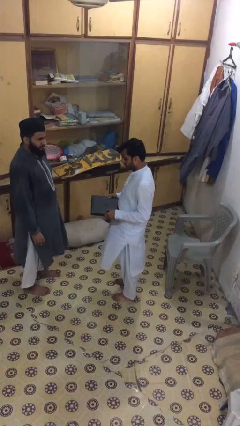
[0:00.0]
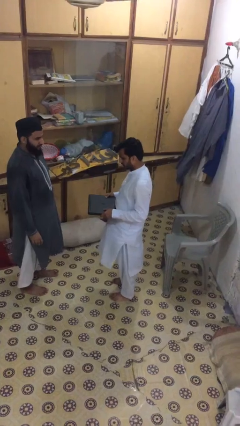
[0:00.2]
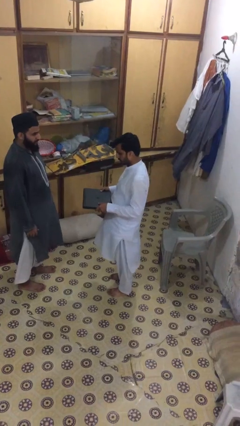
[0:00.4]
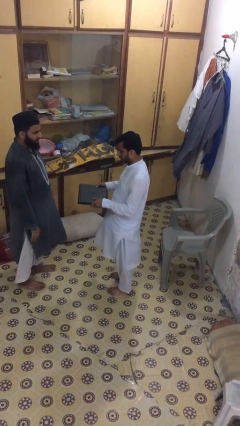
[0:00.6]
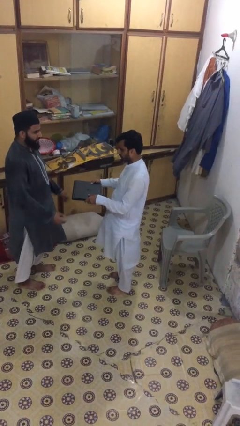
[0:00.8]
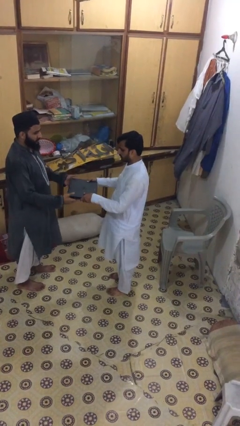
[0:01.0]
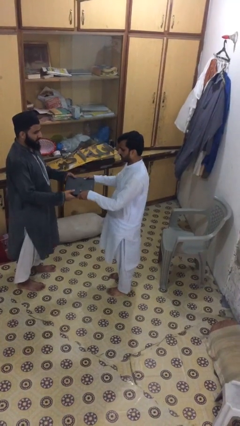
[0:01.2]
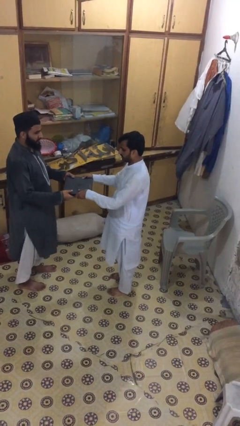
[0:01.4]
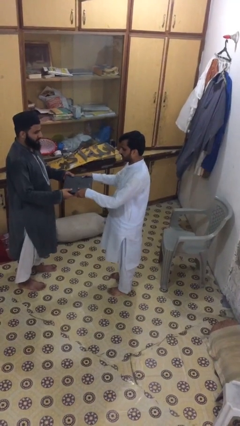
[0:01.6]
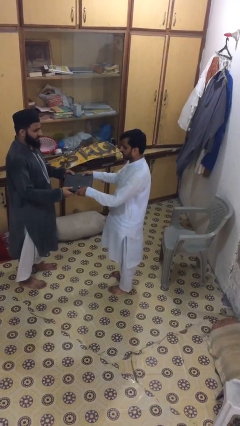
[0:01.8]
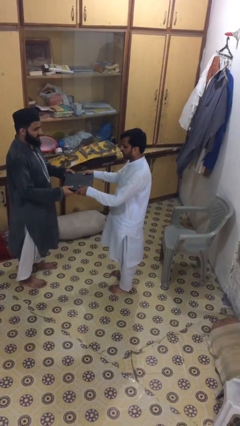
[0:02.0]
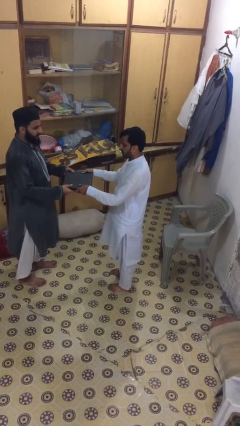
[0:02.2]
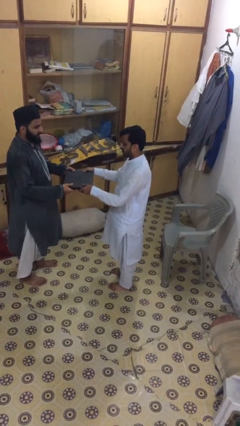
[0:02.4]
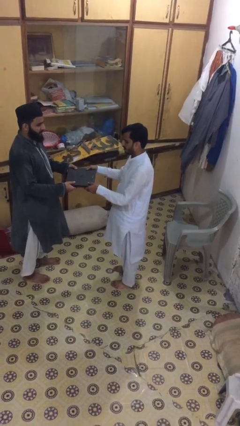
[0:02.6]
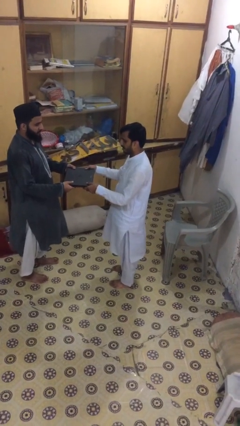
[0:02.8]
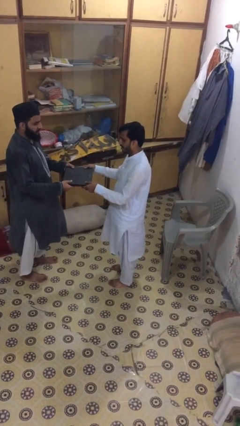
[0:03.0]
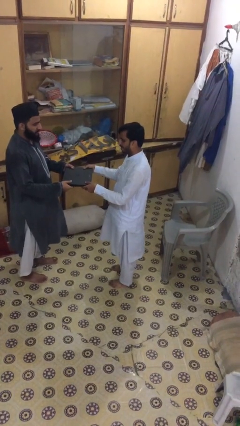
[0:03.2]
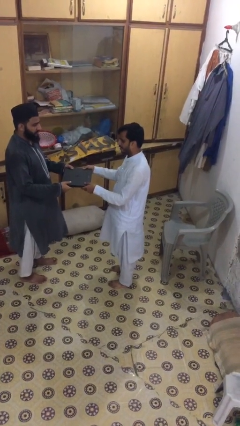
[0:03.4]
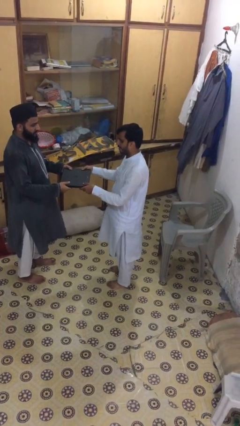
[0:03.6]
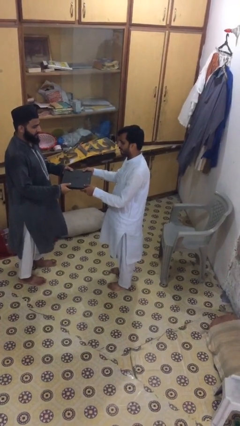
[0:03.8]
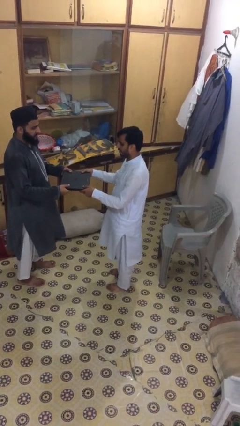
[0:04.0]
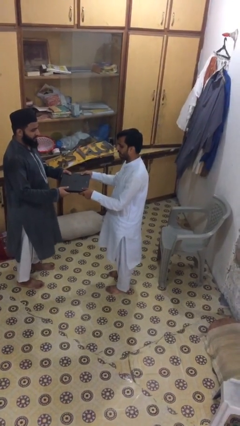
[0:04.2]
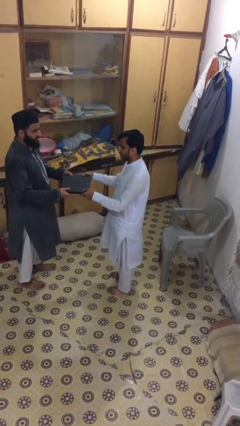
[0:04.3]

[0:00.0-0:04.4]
person transfers object to person

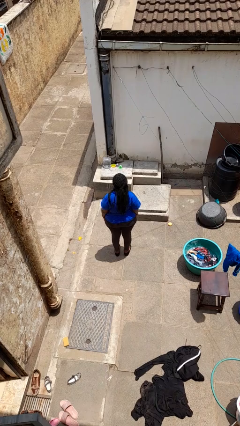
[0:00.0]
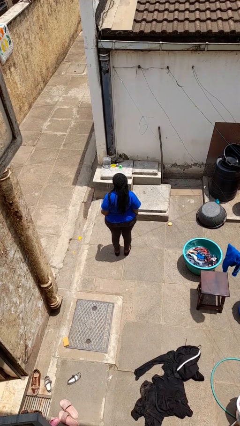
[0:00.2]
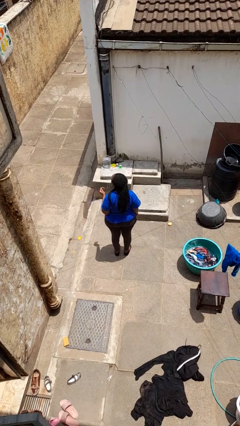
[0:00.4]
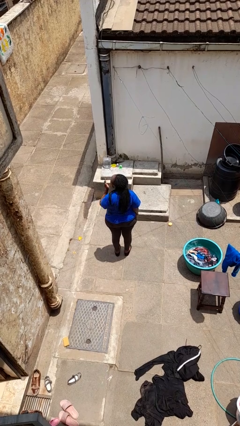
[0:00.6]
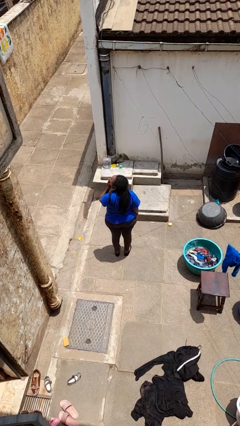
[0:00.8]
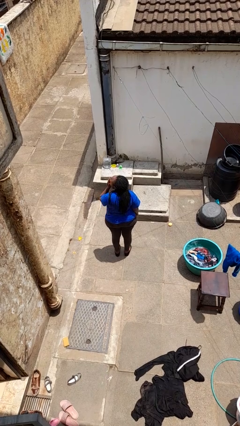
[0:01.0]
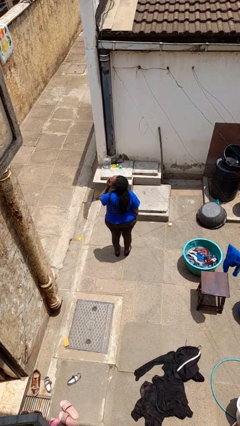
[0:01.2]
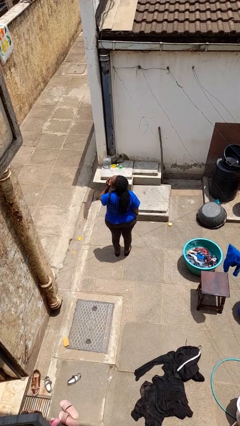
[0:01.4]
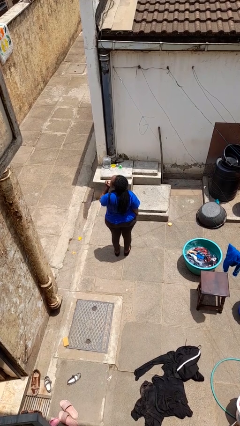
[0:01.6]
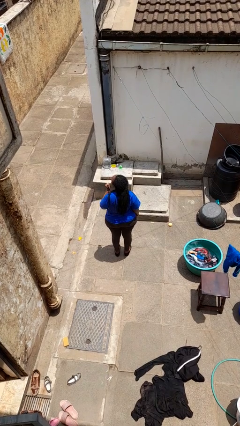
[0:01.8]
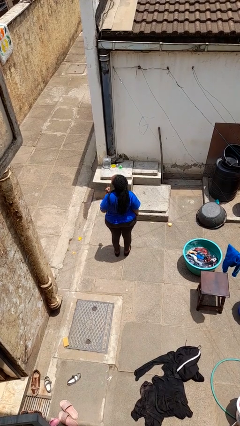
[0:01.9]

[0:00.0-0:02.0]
person yawns

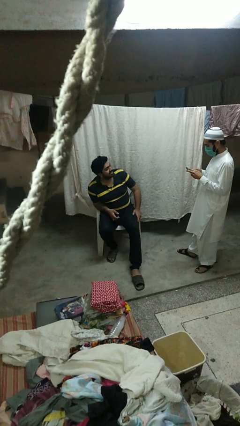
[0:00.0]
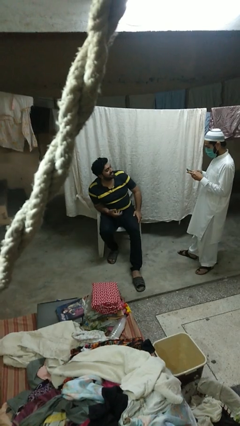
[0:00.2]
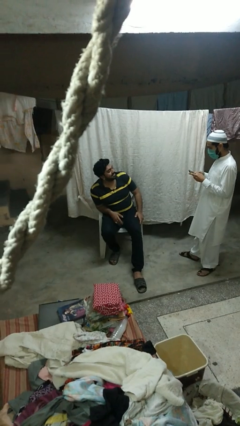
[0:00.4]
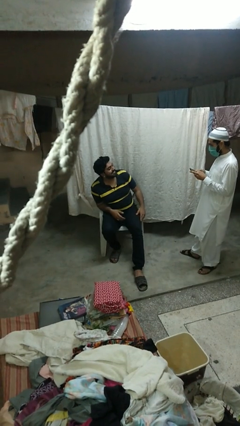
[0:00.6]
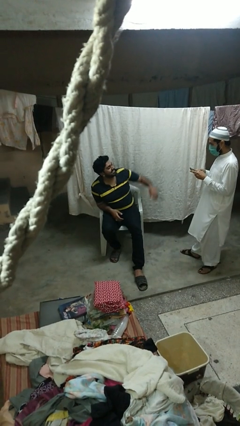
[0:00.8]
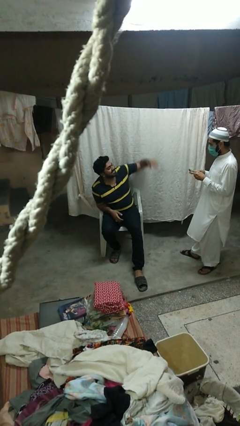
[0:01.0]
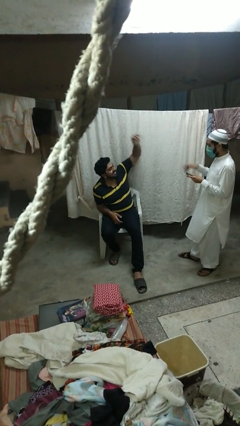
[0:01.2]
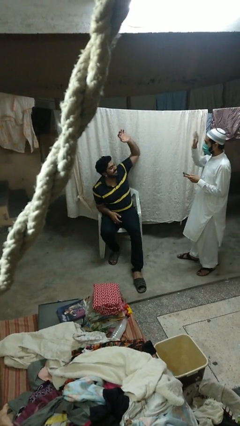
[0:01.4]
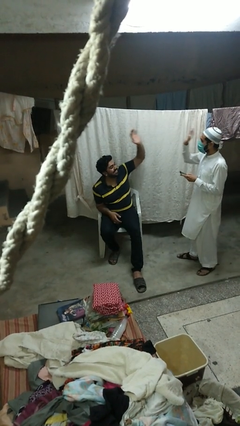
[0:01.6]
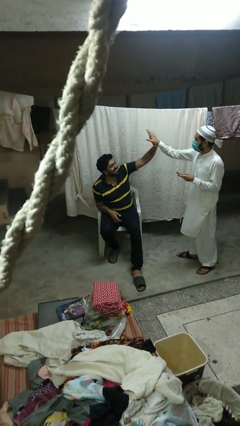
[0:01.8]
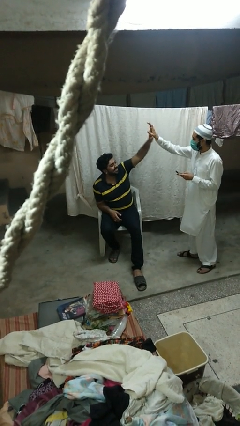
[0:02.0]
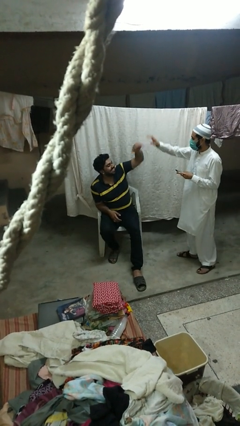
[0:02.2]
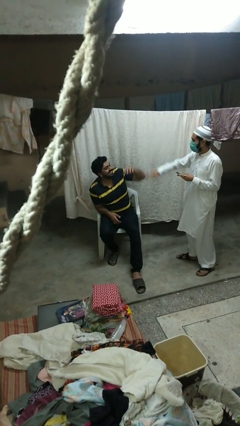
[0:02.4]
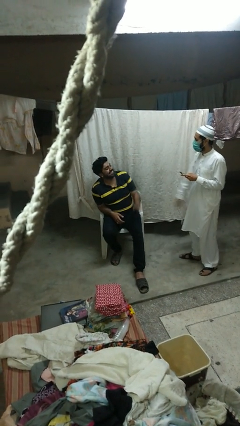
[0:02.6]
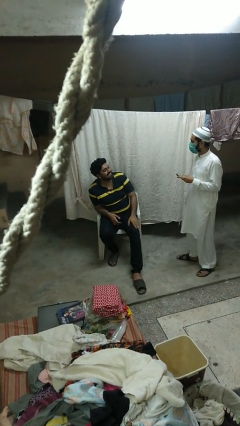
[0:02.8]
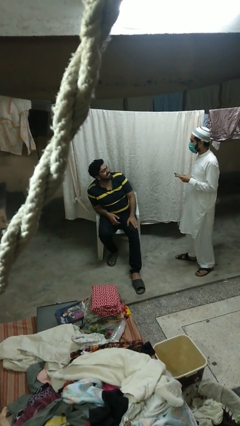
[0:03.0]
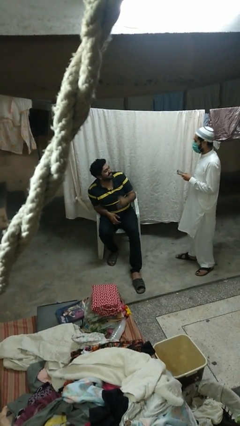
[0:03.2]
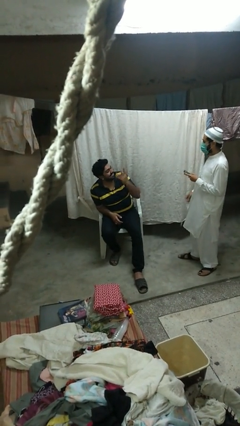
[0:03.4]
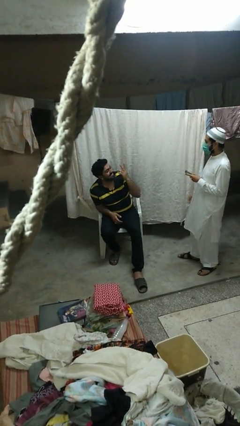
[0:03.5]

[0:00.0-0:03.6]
person highfives hand

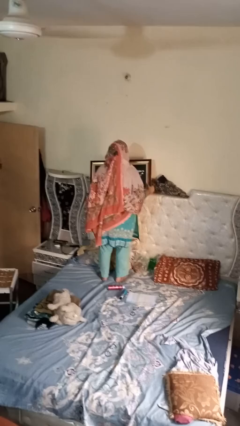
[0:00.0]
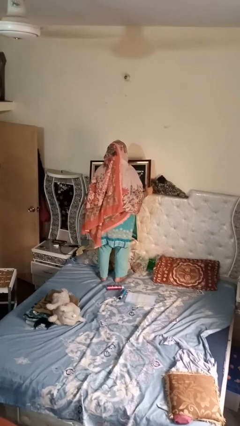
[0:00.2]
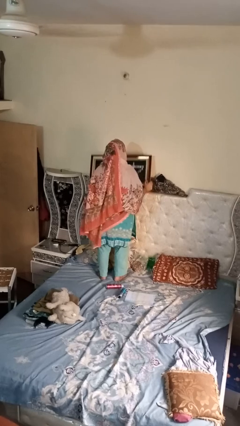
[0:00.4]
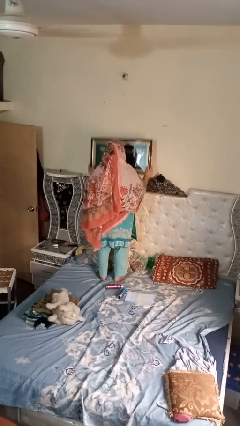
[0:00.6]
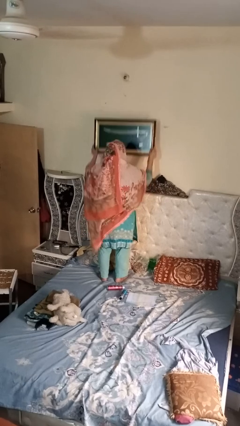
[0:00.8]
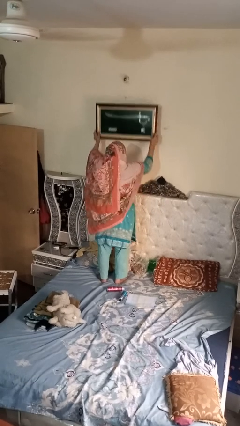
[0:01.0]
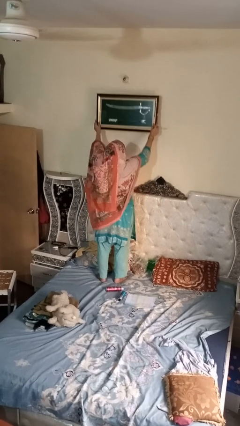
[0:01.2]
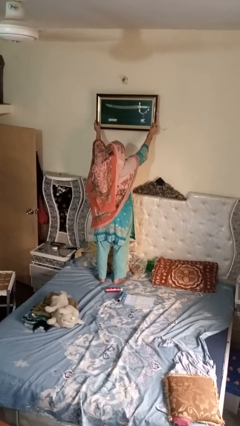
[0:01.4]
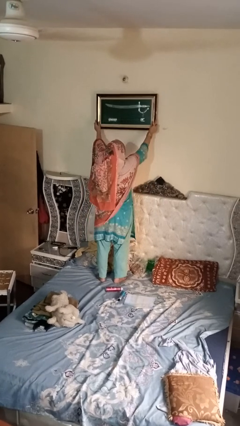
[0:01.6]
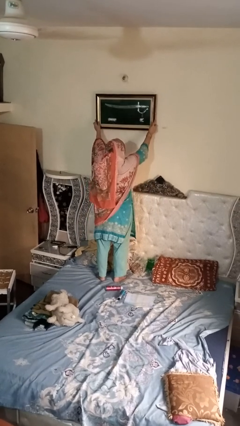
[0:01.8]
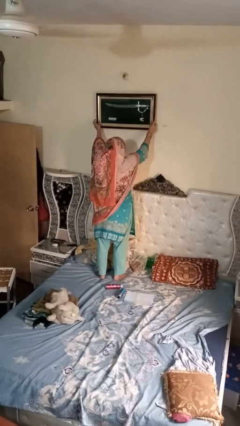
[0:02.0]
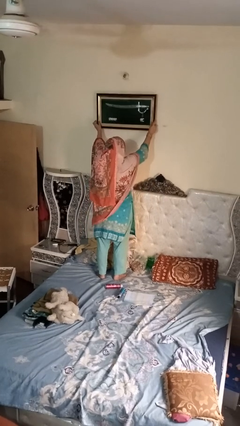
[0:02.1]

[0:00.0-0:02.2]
person takes down picture frame

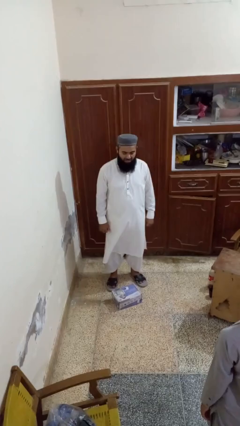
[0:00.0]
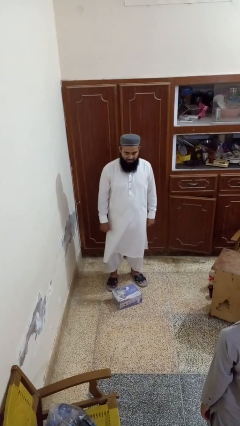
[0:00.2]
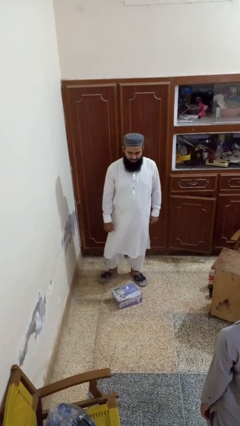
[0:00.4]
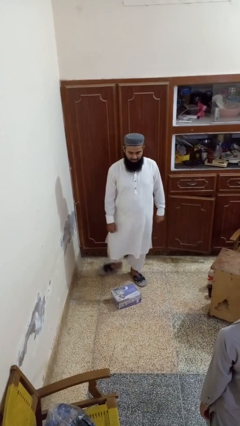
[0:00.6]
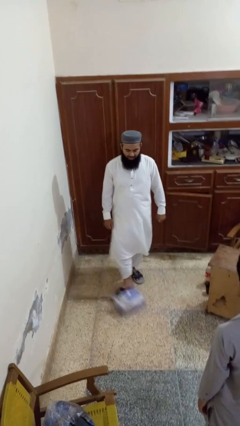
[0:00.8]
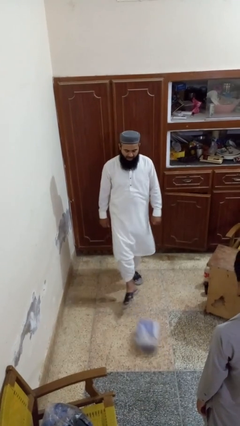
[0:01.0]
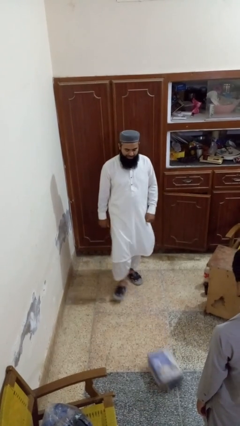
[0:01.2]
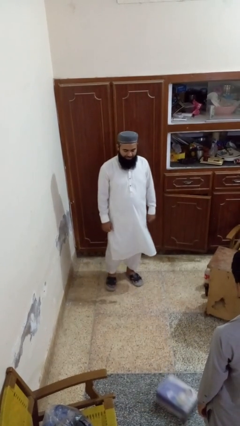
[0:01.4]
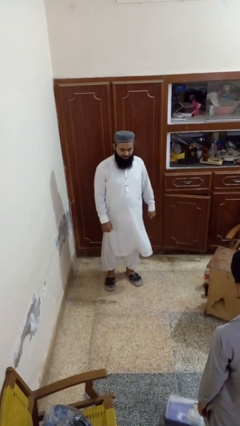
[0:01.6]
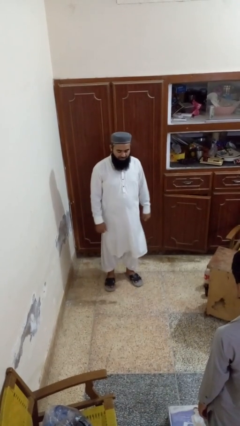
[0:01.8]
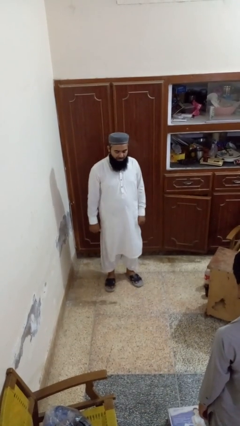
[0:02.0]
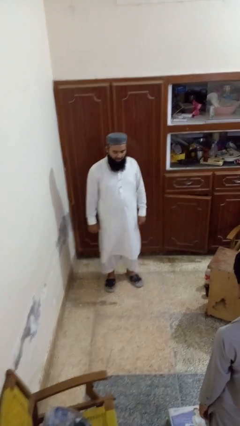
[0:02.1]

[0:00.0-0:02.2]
person kicks object to person

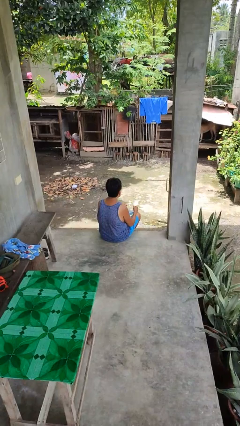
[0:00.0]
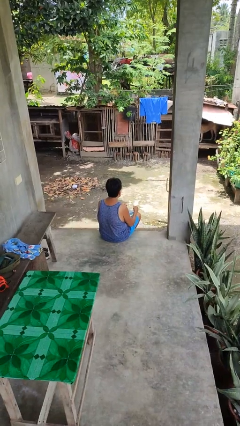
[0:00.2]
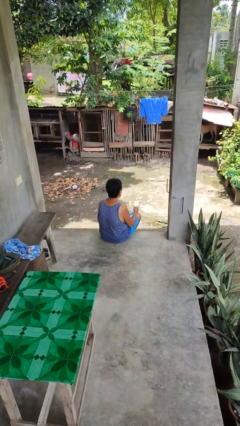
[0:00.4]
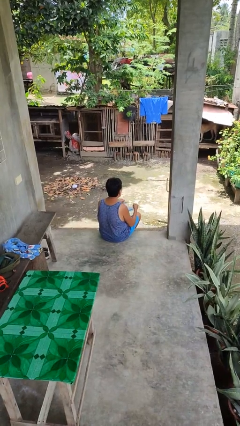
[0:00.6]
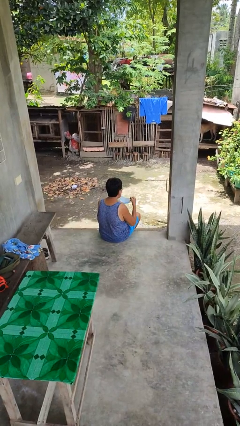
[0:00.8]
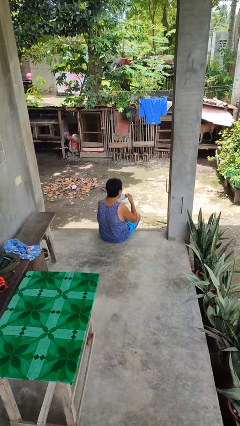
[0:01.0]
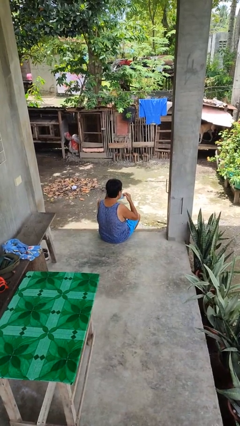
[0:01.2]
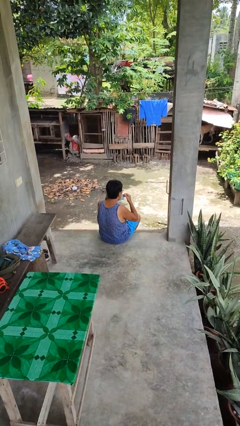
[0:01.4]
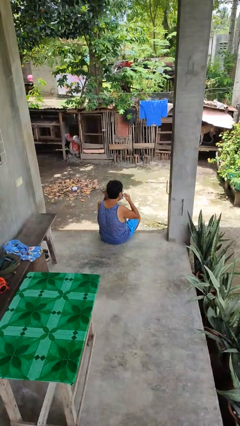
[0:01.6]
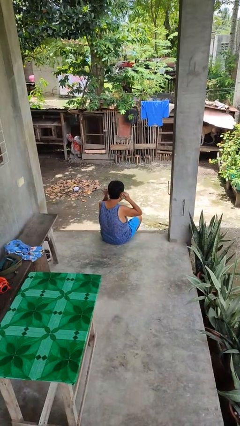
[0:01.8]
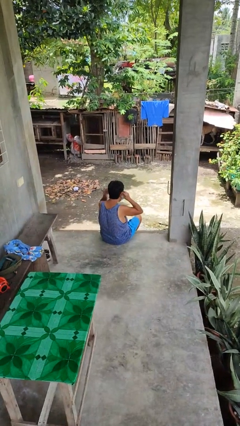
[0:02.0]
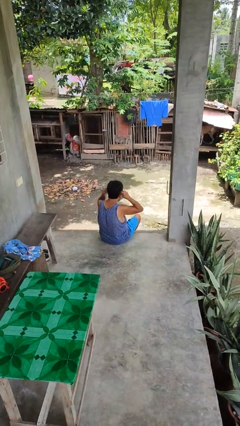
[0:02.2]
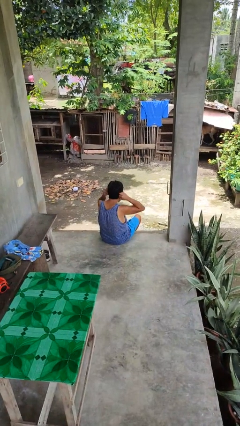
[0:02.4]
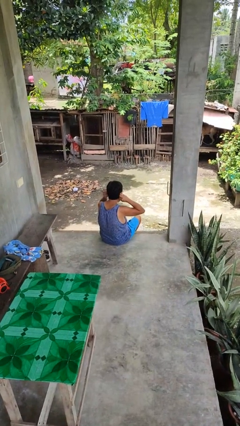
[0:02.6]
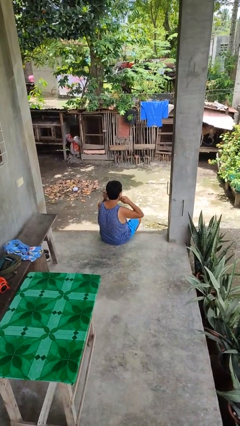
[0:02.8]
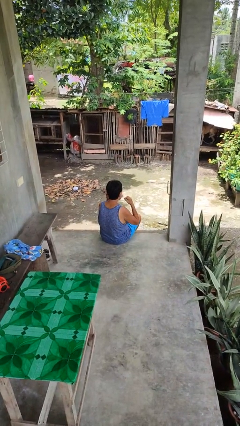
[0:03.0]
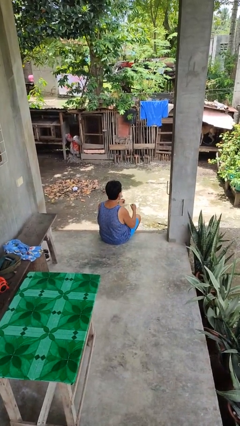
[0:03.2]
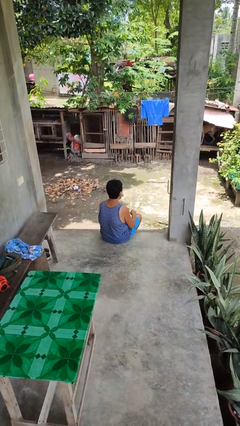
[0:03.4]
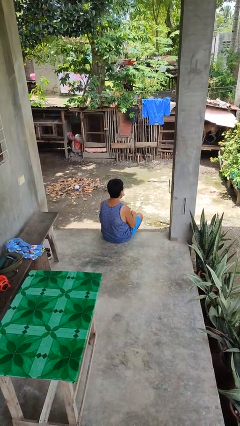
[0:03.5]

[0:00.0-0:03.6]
person puts on facemask
